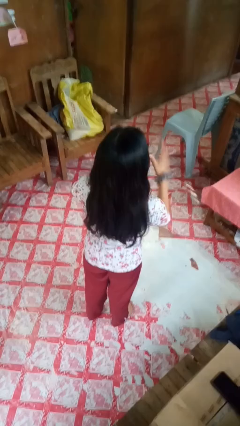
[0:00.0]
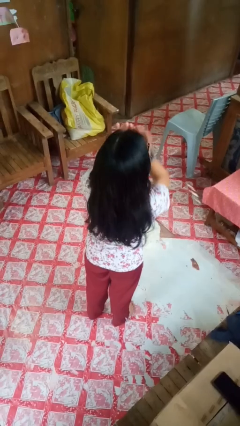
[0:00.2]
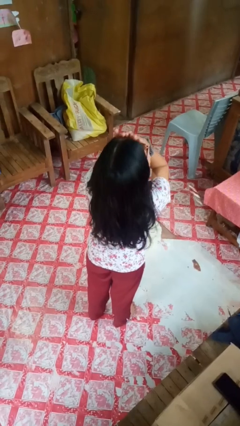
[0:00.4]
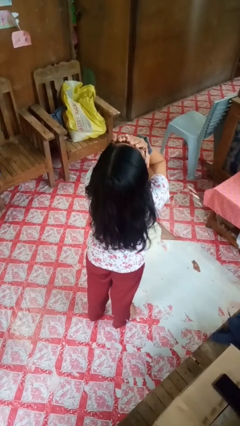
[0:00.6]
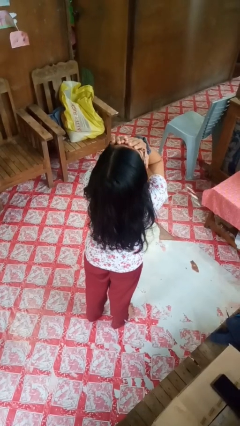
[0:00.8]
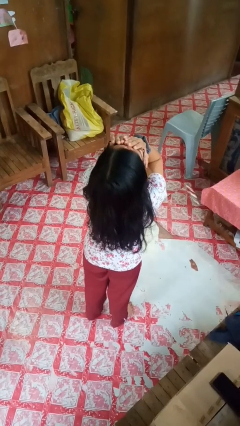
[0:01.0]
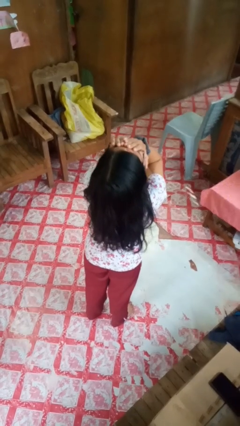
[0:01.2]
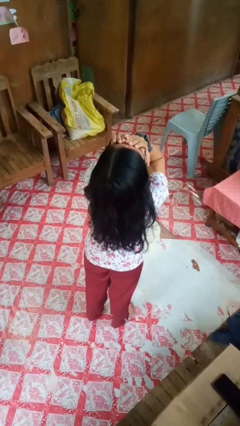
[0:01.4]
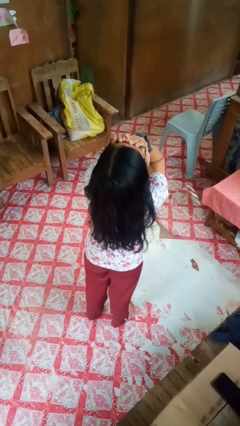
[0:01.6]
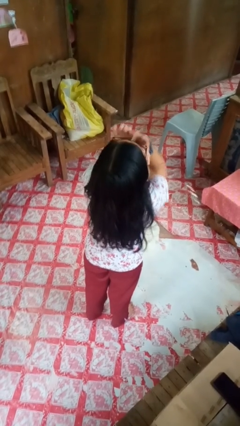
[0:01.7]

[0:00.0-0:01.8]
person covers face with hands

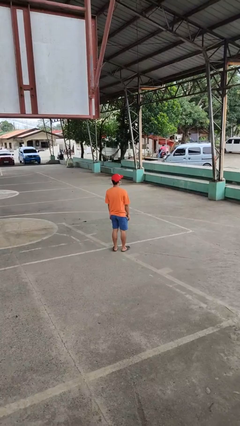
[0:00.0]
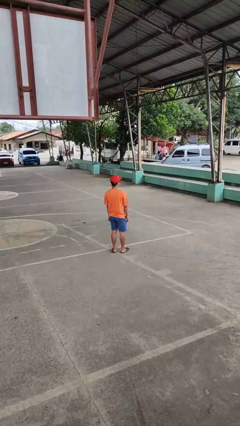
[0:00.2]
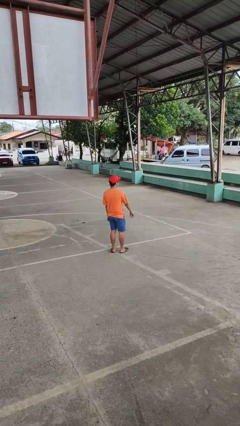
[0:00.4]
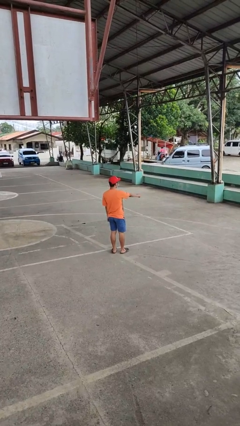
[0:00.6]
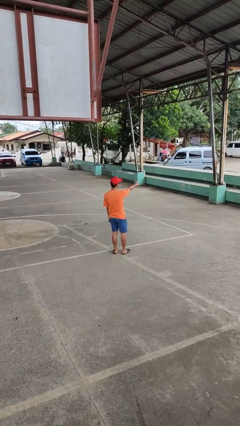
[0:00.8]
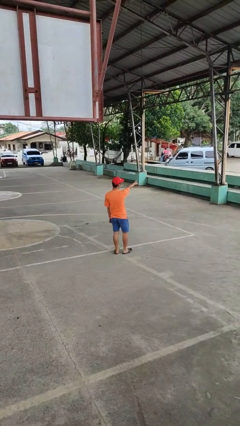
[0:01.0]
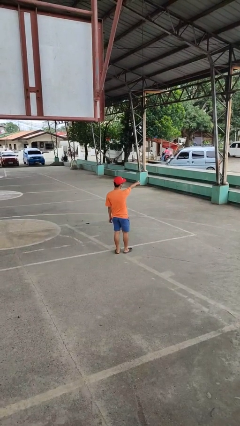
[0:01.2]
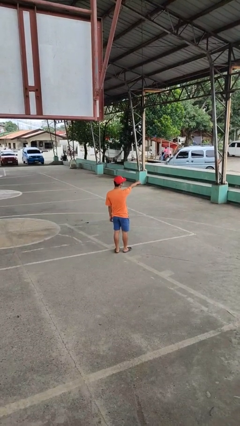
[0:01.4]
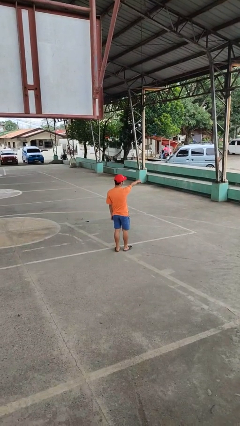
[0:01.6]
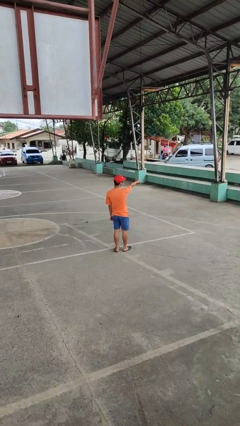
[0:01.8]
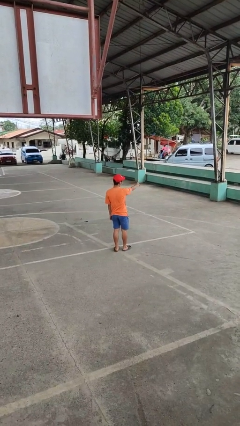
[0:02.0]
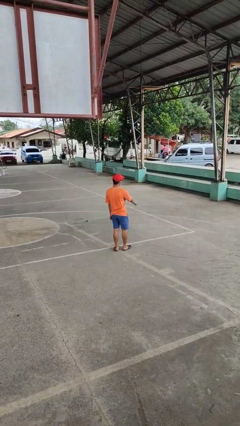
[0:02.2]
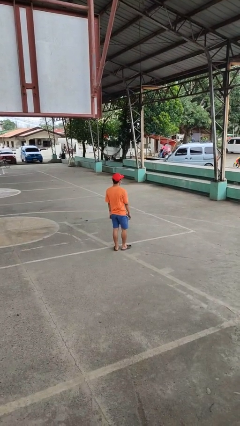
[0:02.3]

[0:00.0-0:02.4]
person points at person

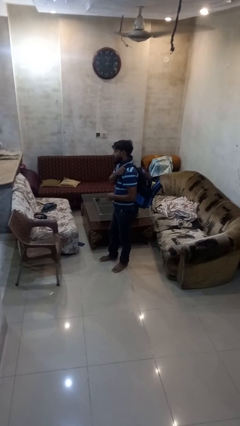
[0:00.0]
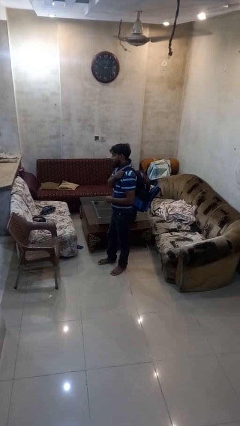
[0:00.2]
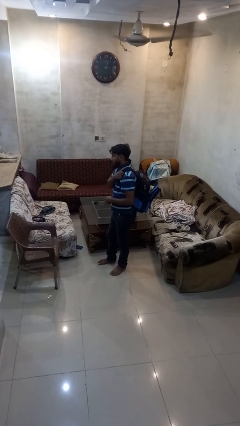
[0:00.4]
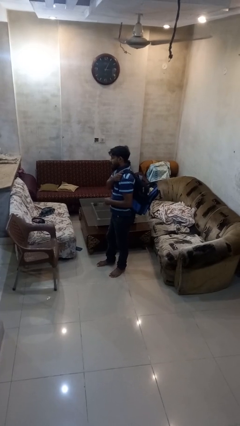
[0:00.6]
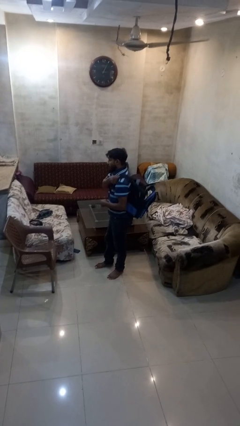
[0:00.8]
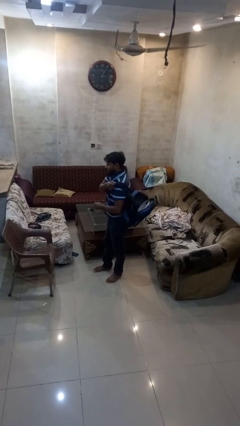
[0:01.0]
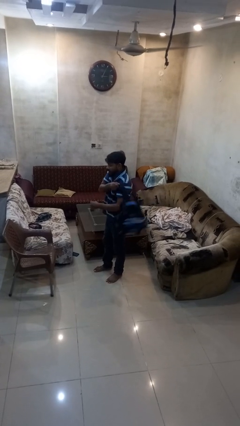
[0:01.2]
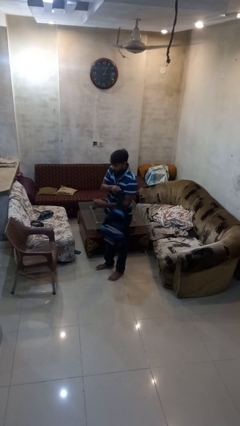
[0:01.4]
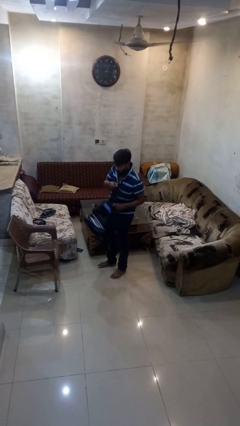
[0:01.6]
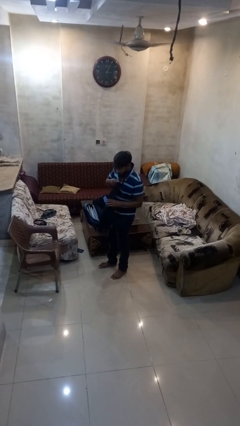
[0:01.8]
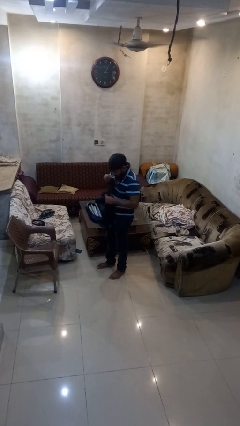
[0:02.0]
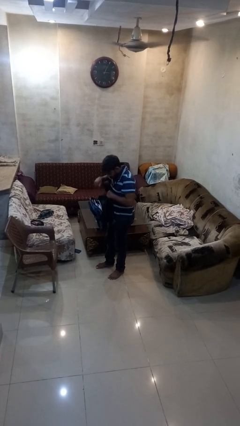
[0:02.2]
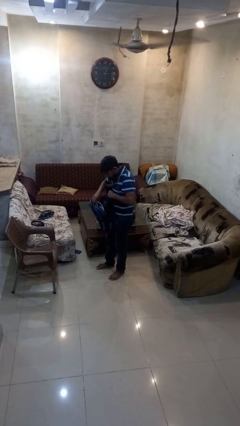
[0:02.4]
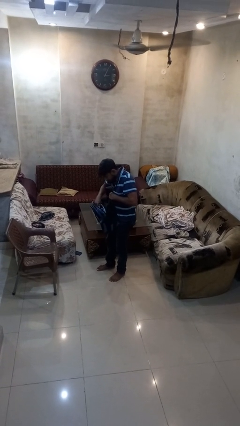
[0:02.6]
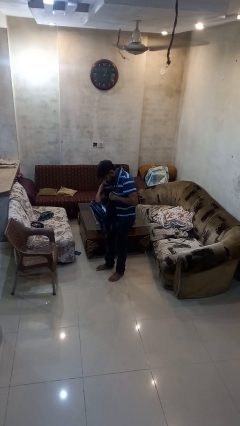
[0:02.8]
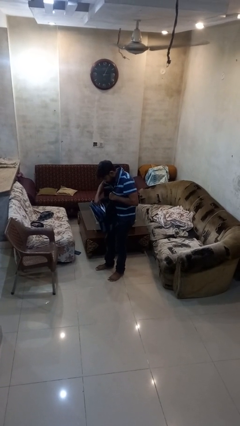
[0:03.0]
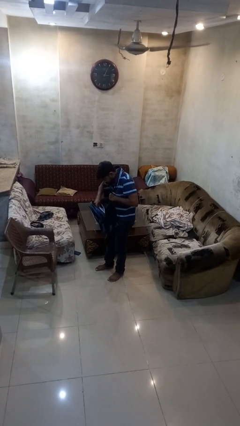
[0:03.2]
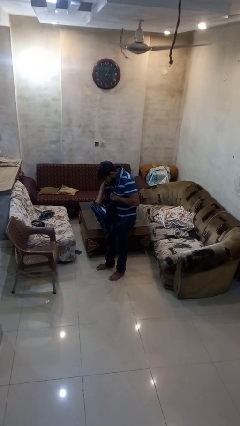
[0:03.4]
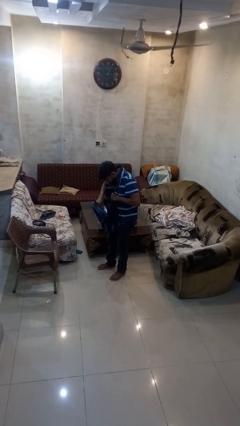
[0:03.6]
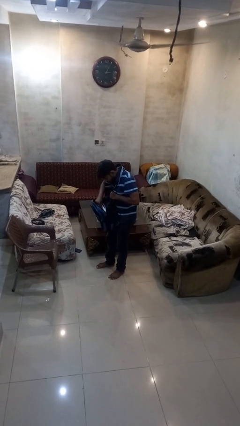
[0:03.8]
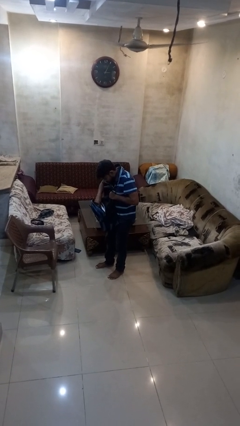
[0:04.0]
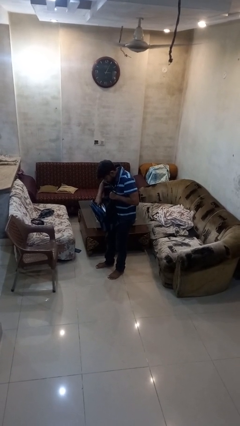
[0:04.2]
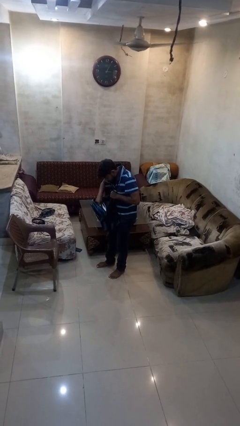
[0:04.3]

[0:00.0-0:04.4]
person searches in backpack

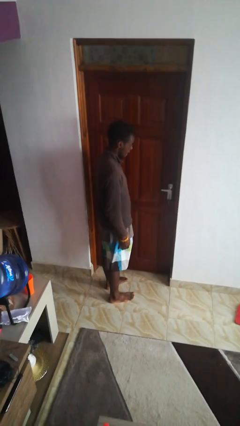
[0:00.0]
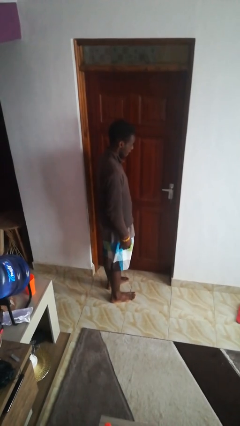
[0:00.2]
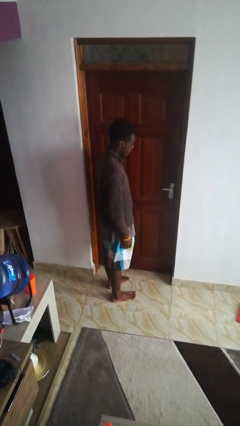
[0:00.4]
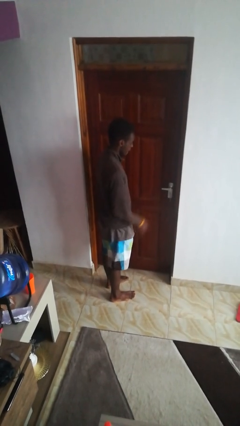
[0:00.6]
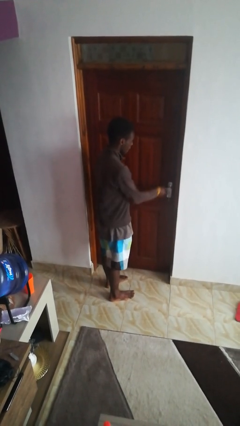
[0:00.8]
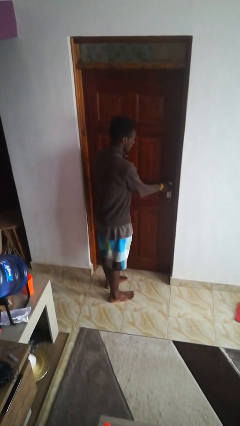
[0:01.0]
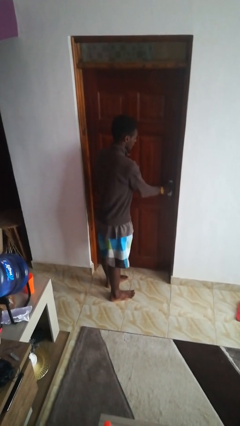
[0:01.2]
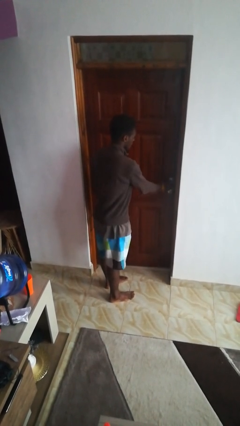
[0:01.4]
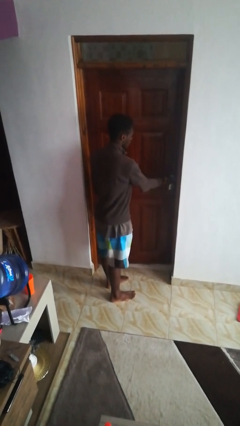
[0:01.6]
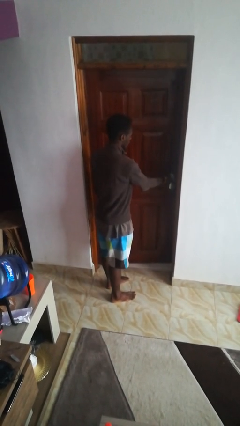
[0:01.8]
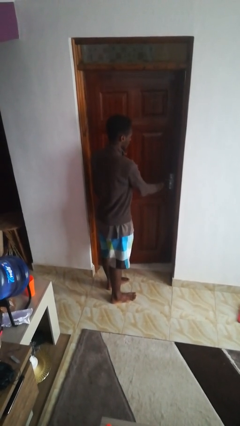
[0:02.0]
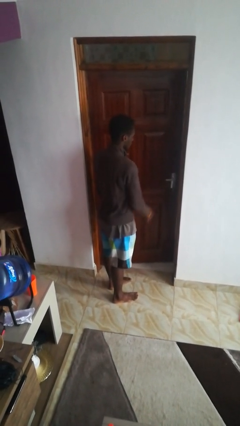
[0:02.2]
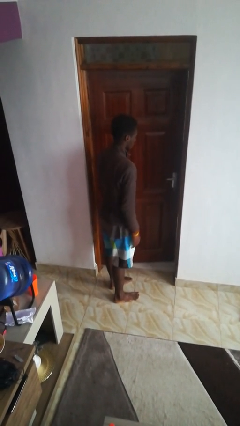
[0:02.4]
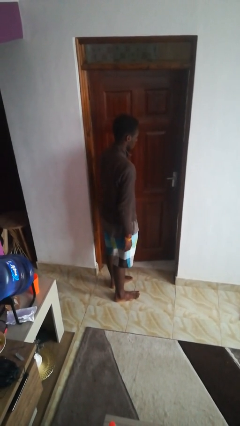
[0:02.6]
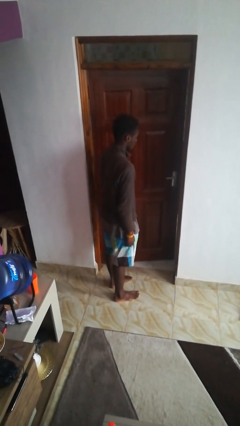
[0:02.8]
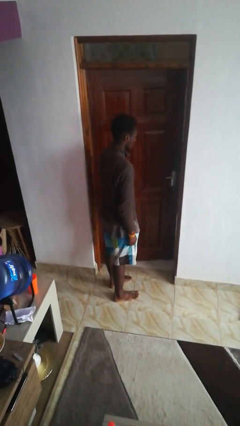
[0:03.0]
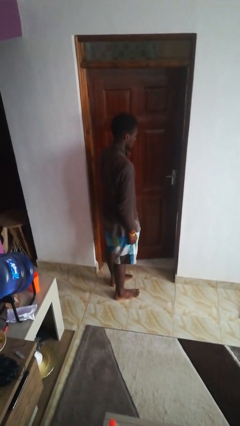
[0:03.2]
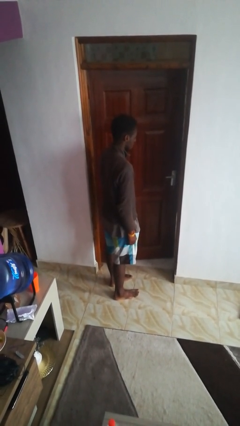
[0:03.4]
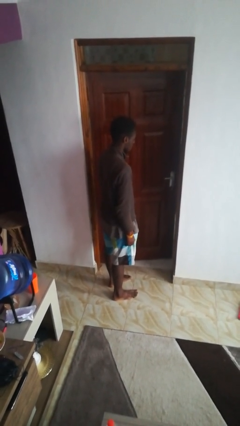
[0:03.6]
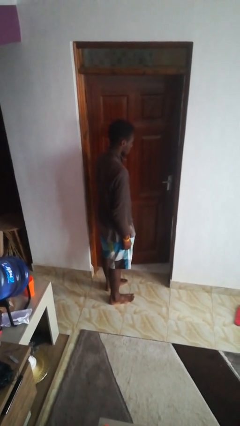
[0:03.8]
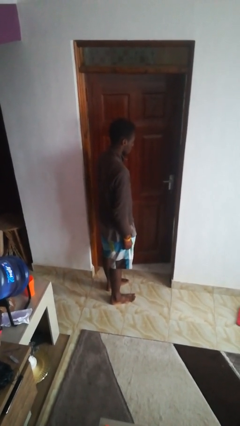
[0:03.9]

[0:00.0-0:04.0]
person opens facility door

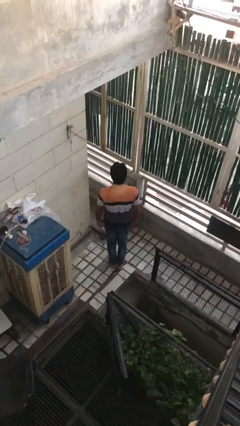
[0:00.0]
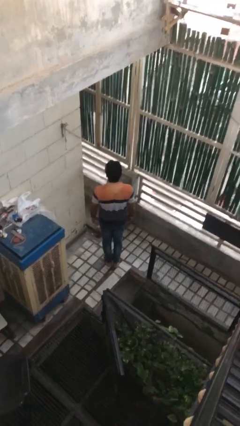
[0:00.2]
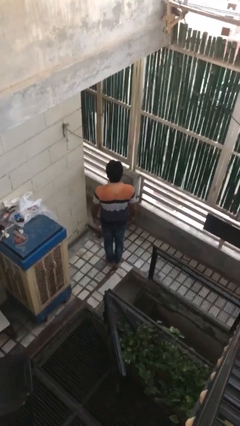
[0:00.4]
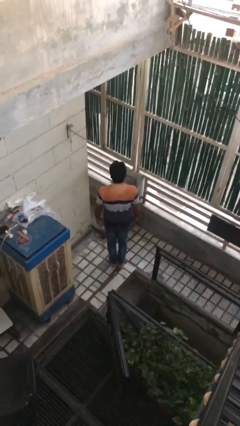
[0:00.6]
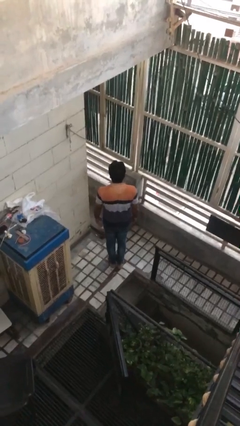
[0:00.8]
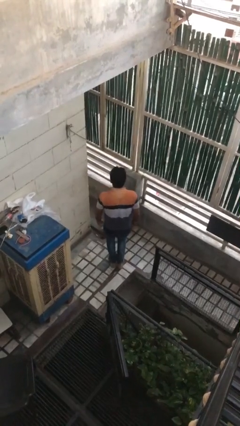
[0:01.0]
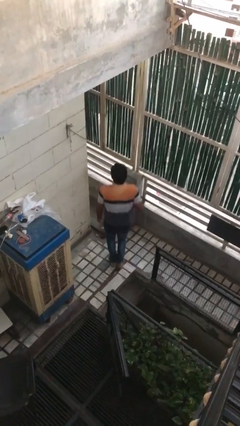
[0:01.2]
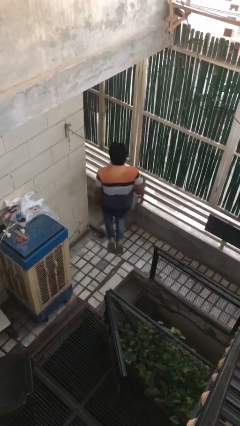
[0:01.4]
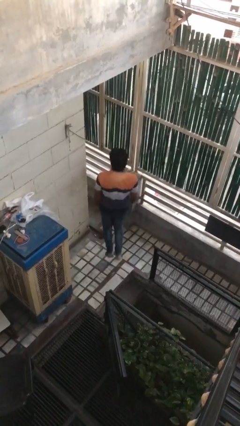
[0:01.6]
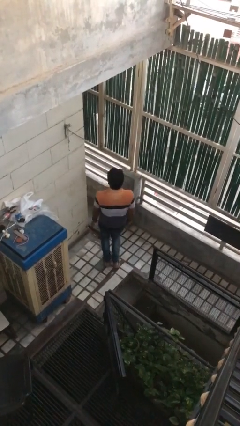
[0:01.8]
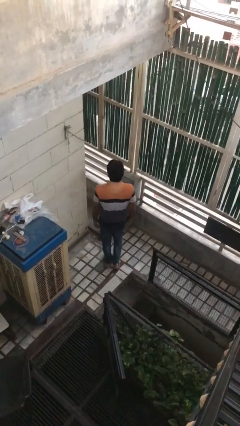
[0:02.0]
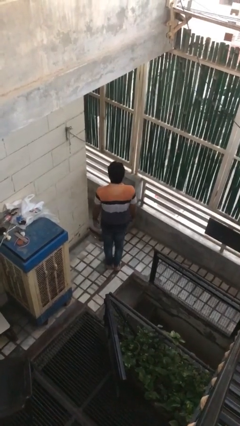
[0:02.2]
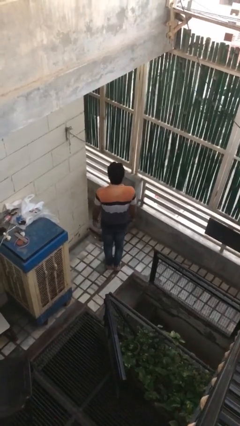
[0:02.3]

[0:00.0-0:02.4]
person jumps

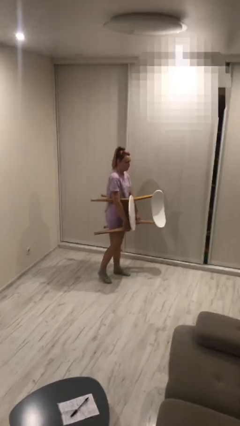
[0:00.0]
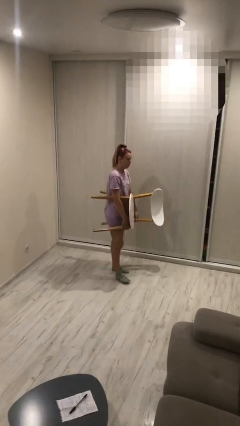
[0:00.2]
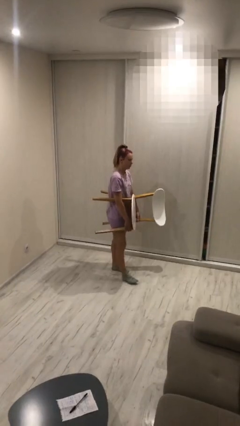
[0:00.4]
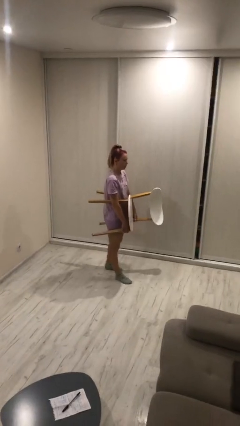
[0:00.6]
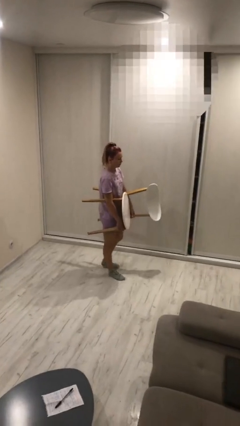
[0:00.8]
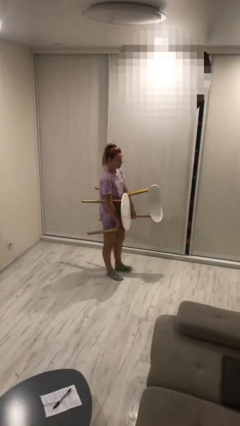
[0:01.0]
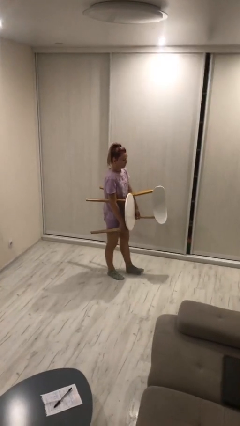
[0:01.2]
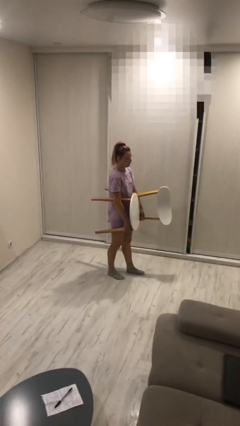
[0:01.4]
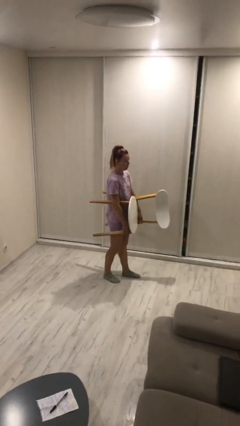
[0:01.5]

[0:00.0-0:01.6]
person carries furniture

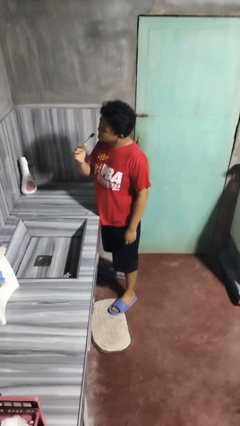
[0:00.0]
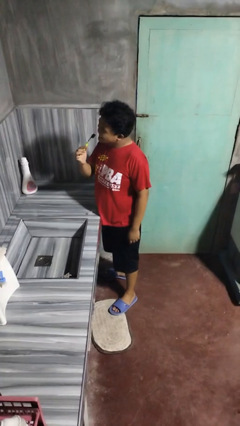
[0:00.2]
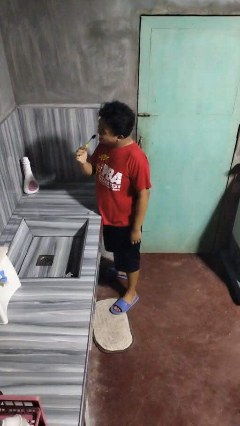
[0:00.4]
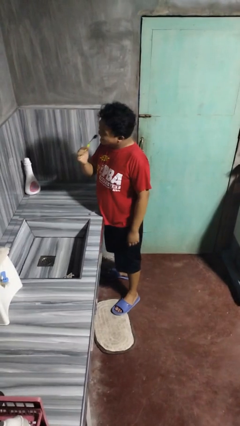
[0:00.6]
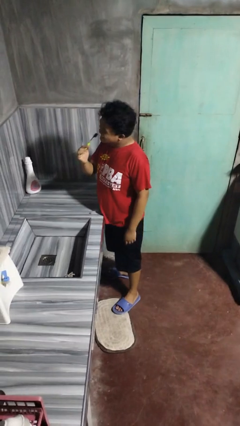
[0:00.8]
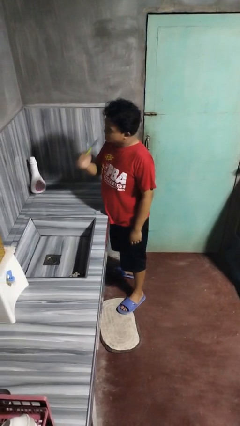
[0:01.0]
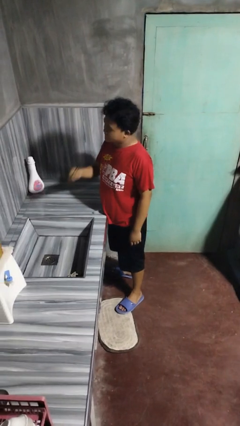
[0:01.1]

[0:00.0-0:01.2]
person brushes teeth
